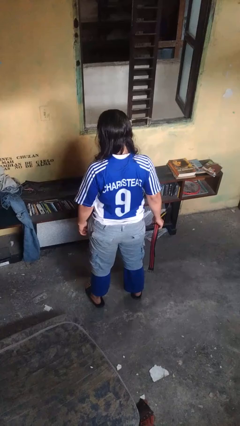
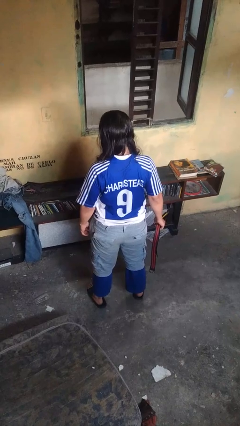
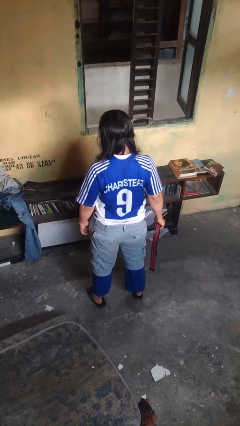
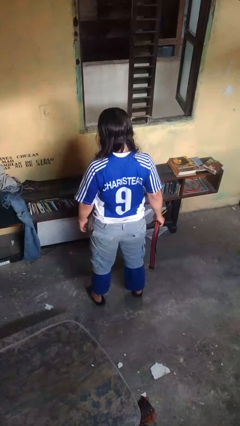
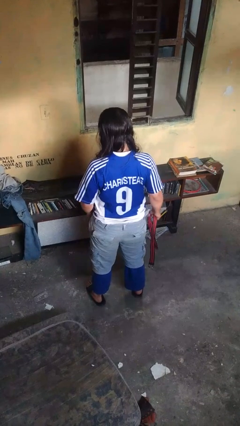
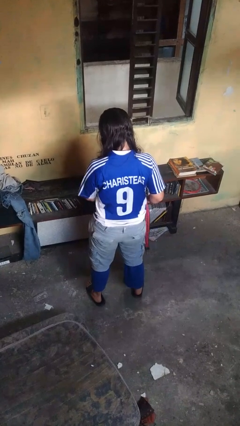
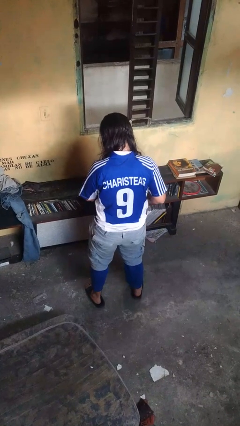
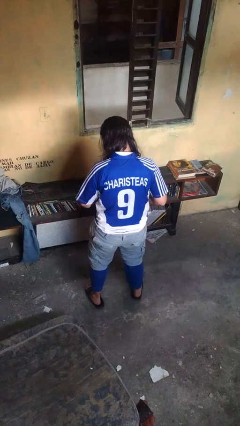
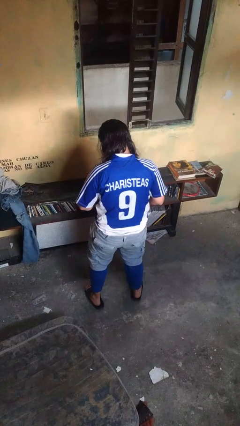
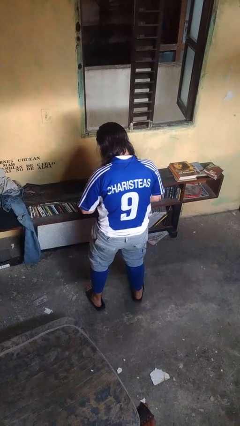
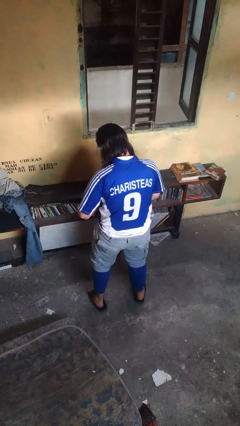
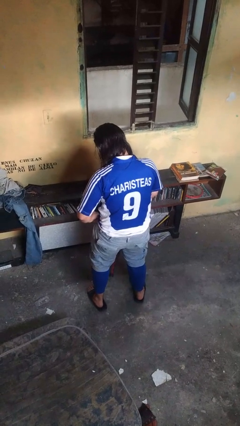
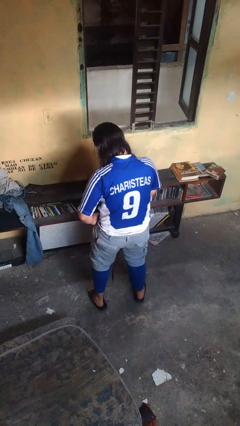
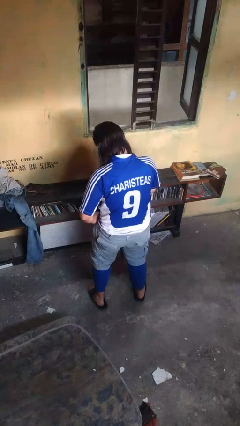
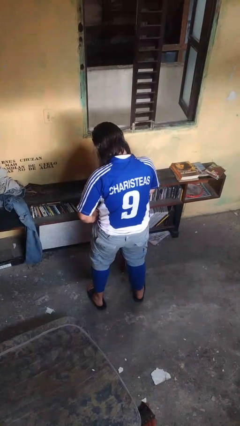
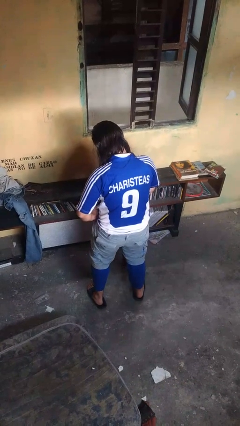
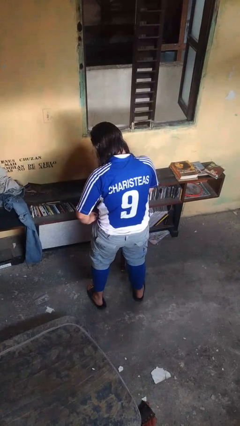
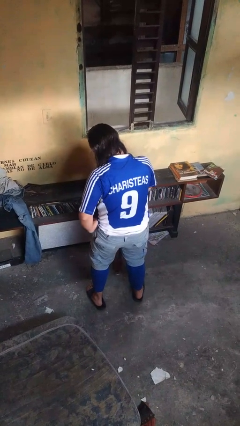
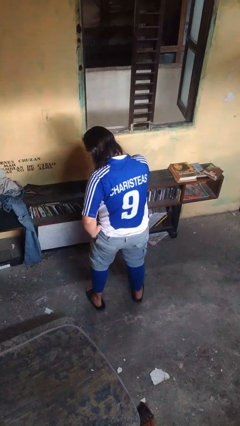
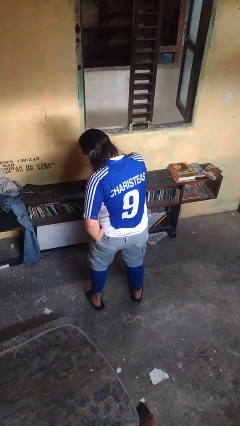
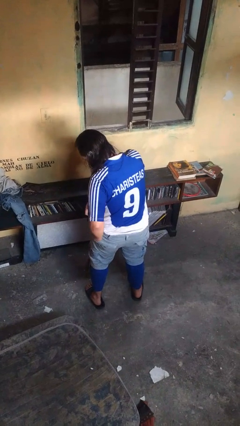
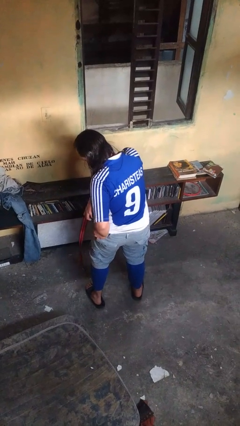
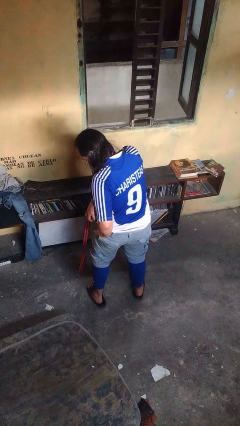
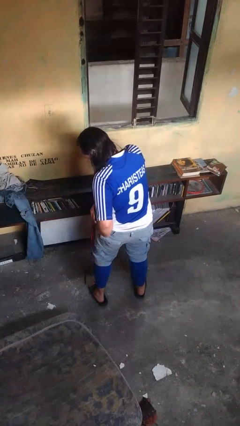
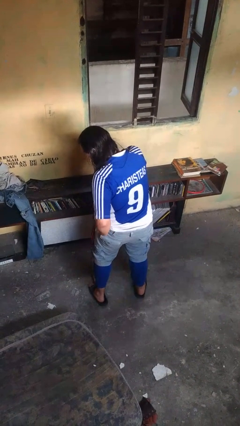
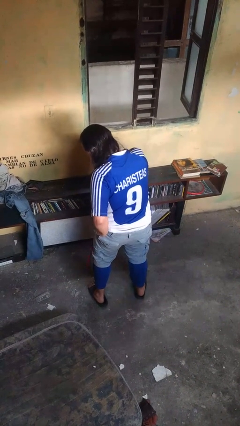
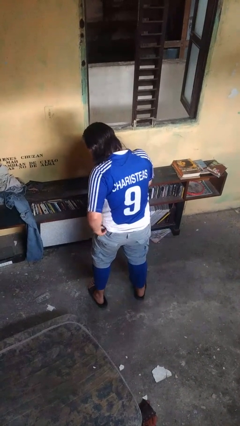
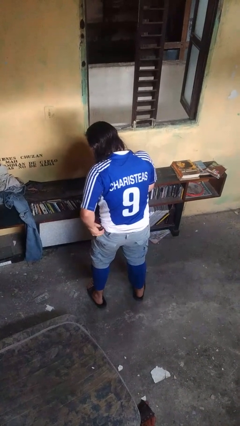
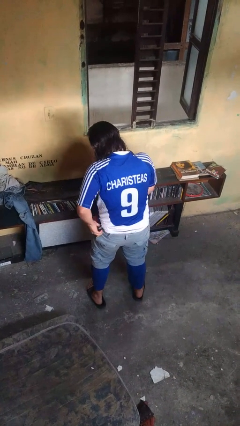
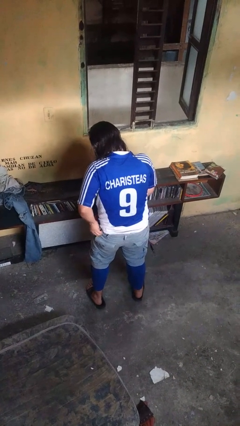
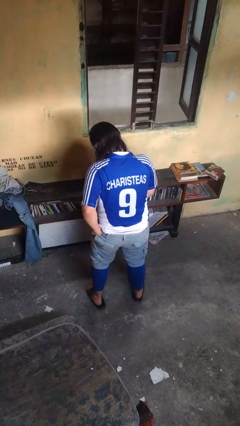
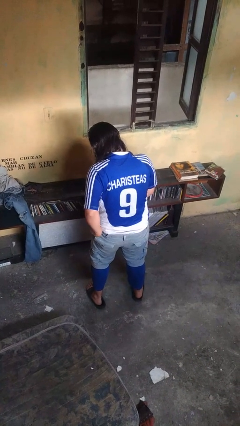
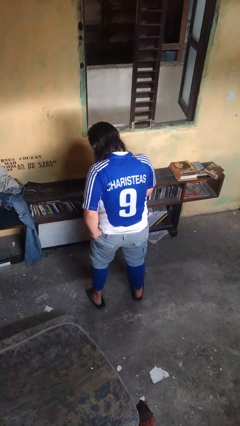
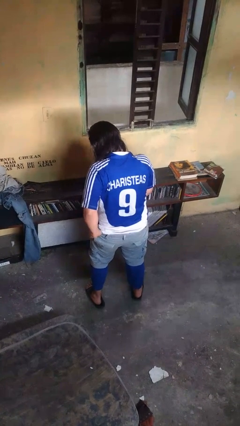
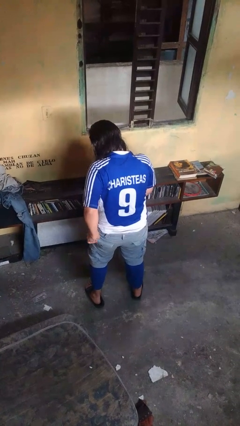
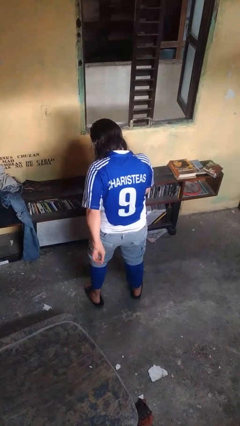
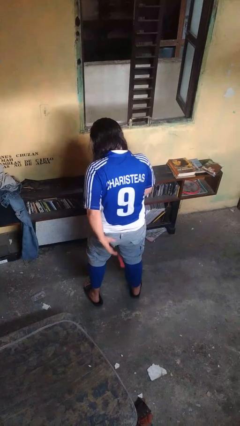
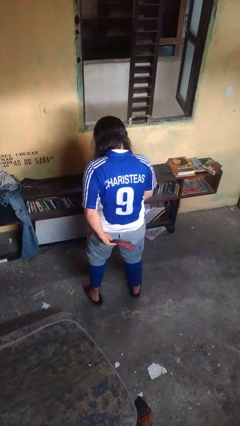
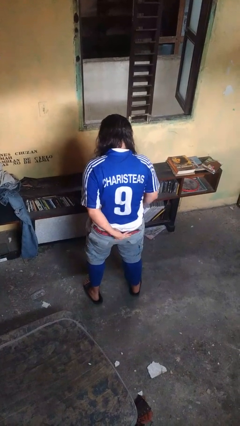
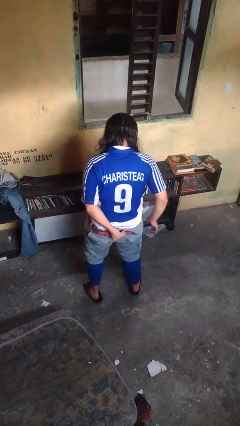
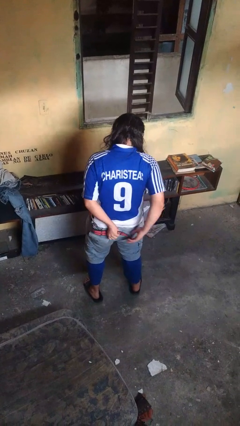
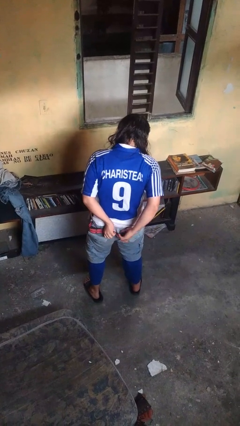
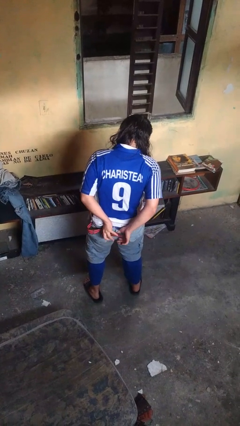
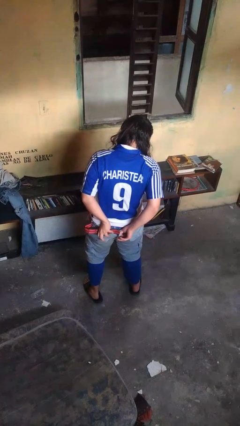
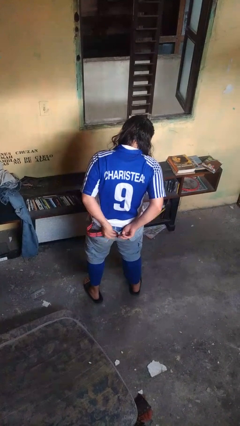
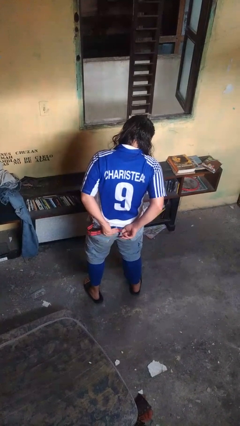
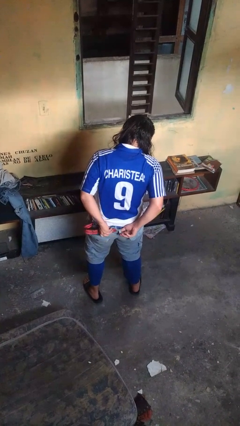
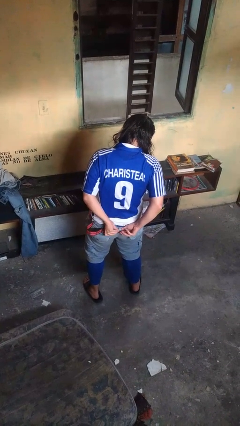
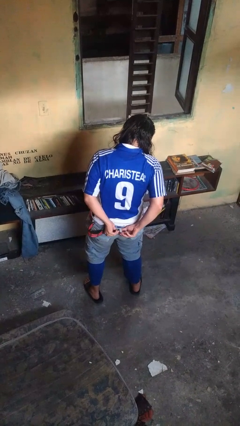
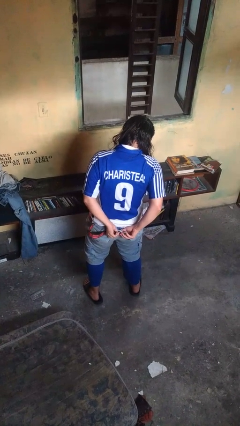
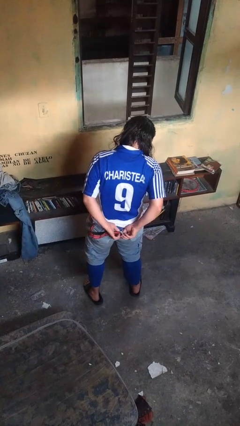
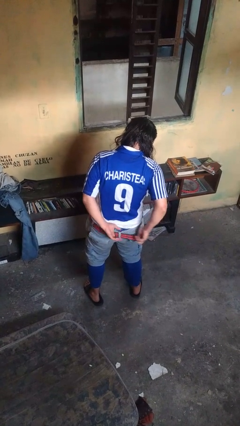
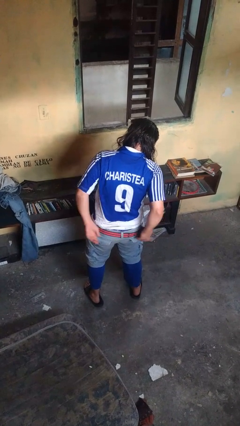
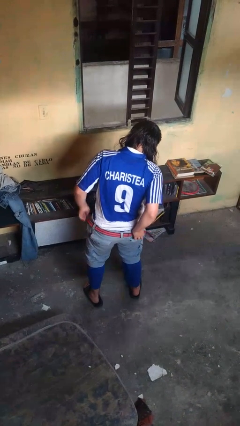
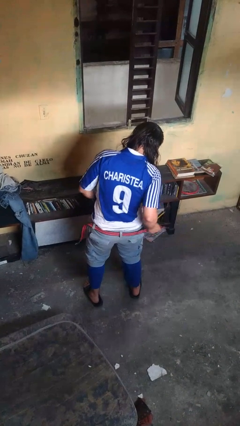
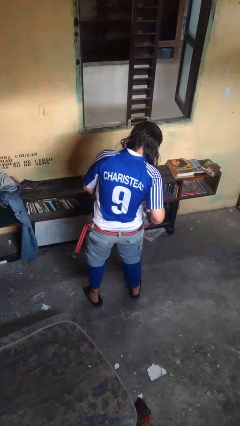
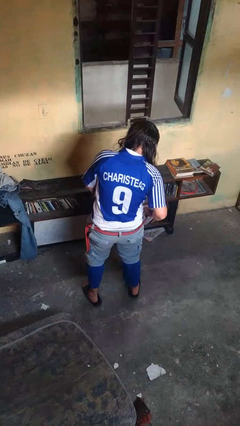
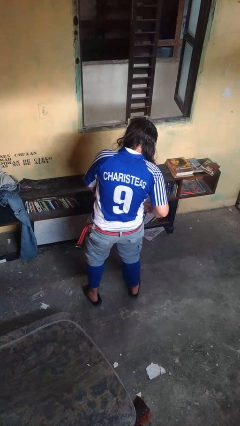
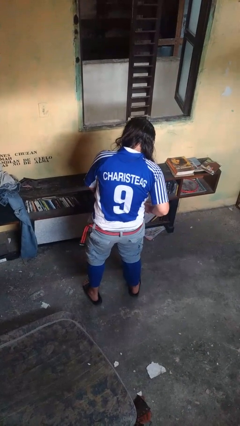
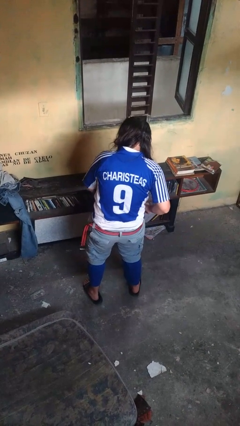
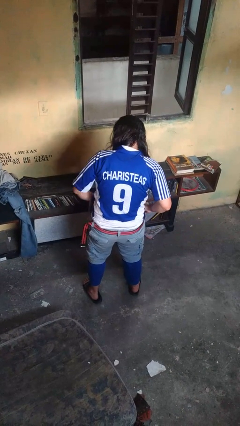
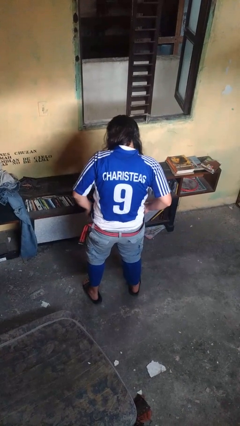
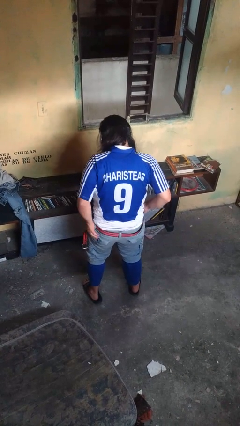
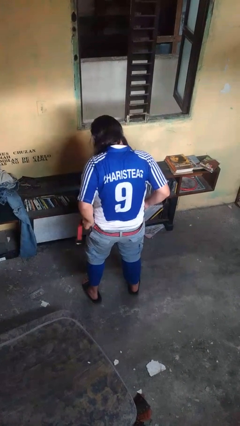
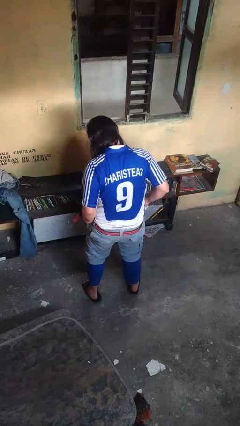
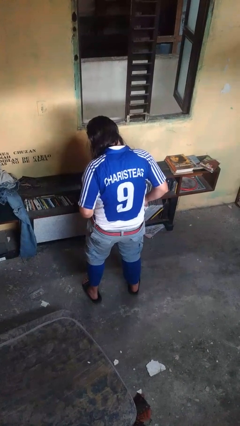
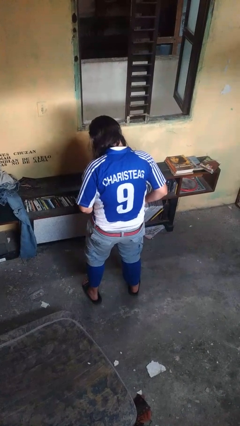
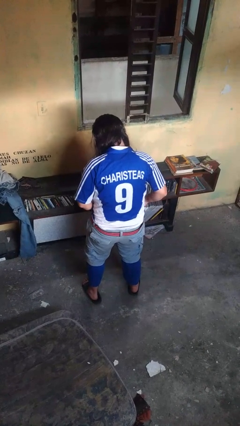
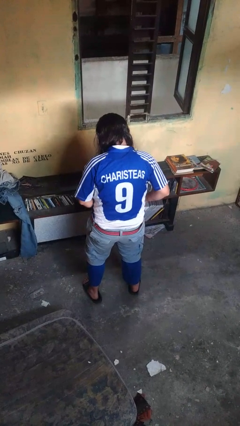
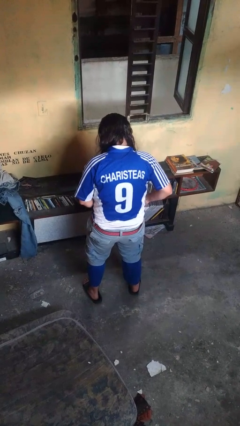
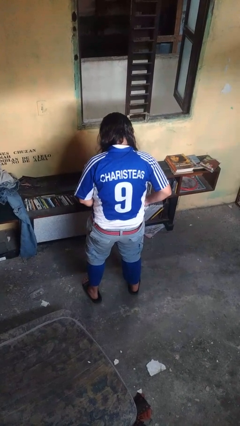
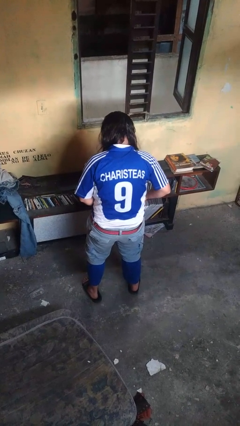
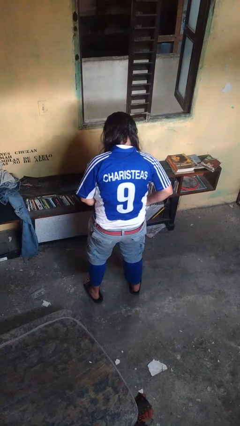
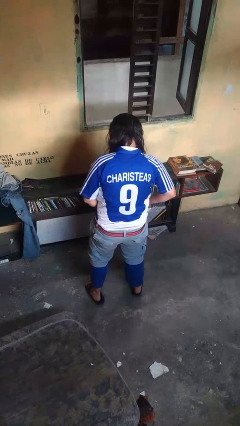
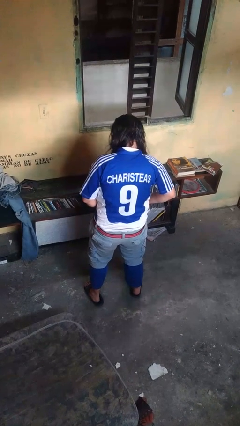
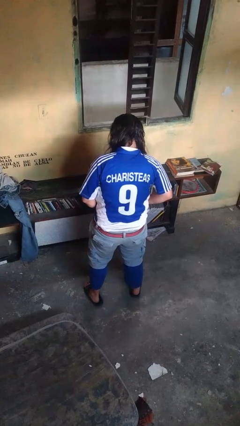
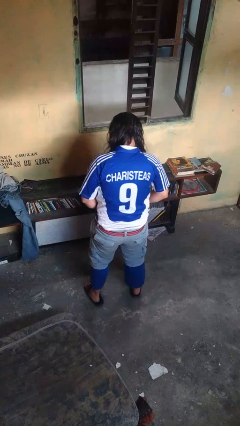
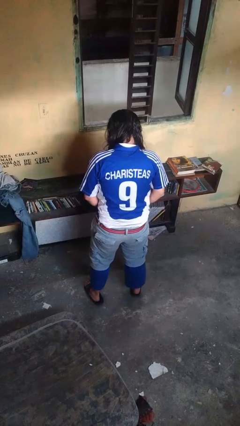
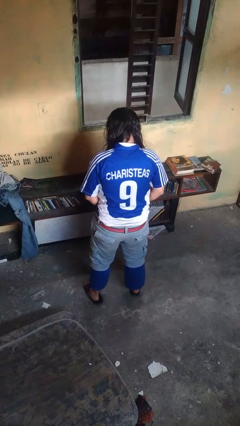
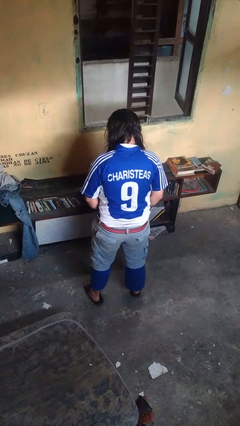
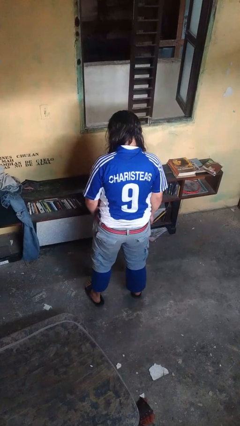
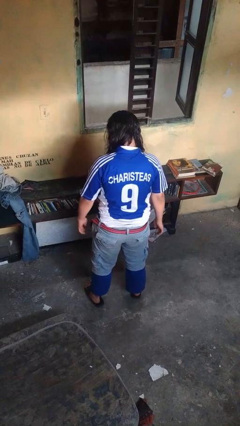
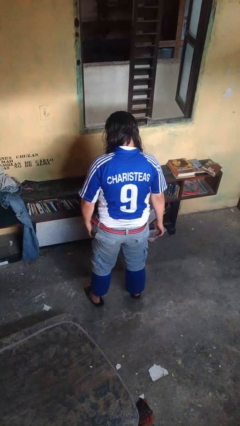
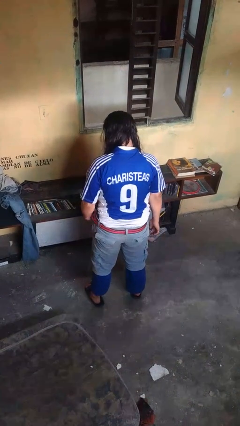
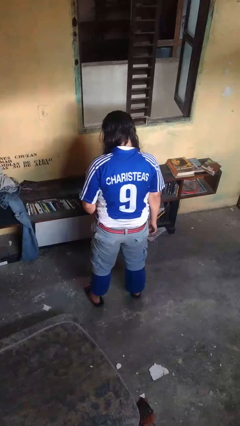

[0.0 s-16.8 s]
person puts on belt

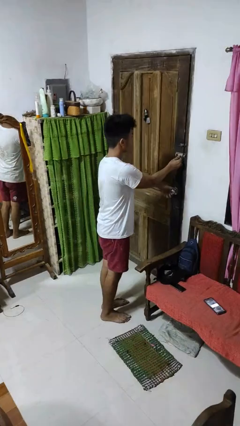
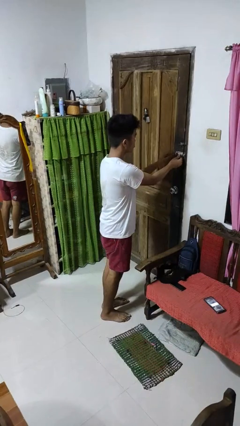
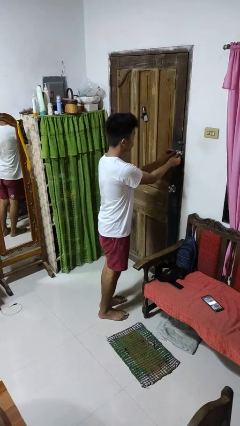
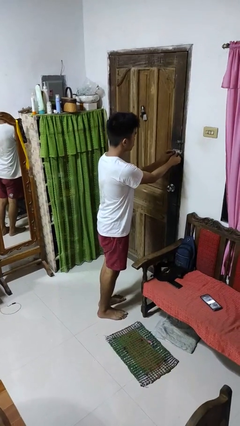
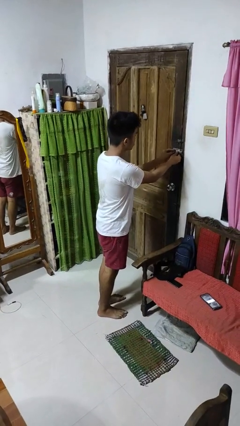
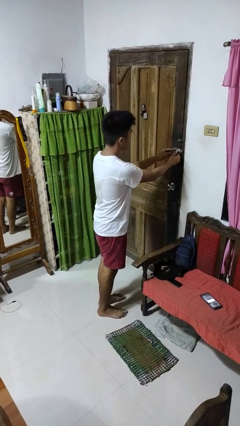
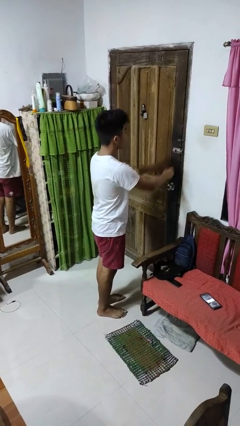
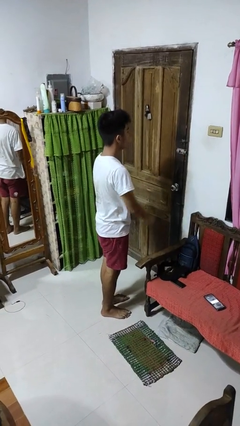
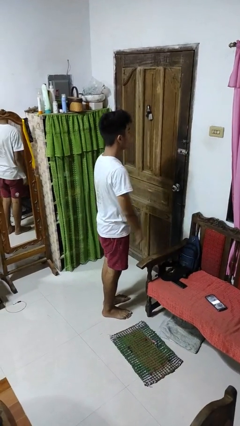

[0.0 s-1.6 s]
person locks door with keys
